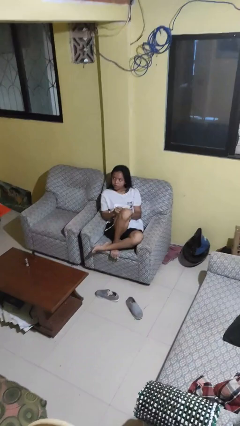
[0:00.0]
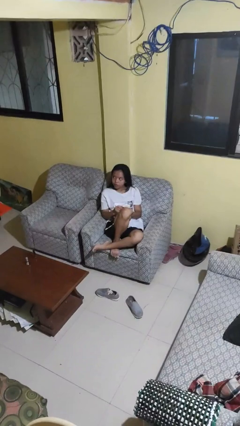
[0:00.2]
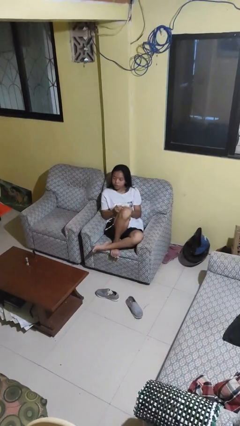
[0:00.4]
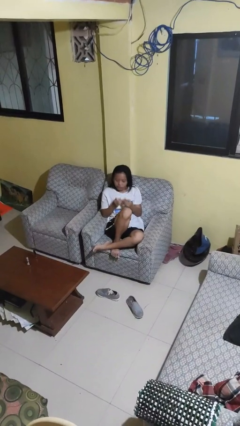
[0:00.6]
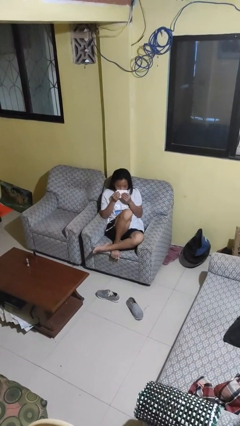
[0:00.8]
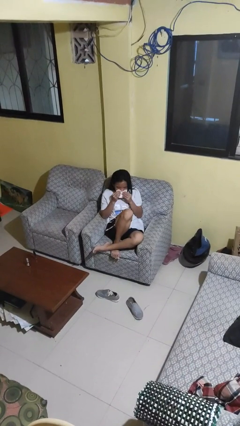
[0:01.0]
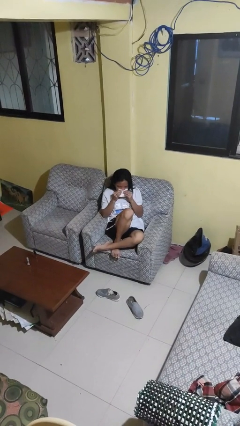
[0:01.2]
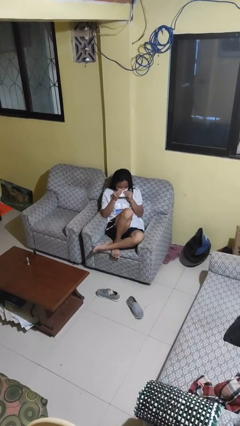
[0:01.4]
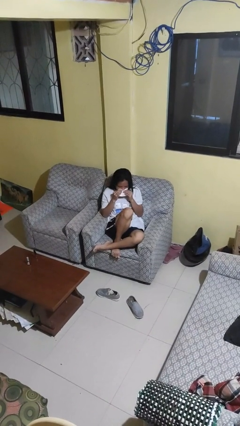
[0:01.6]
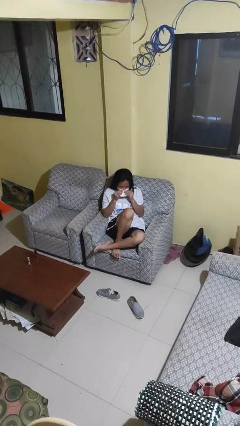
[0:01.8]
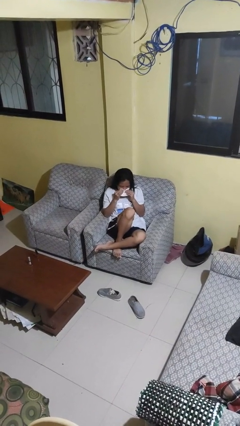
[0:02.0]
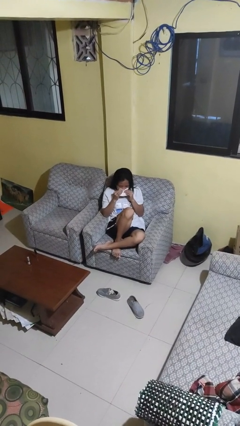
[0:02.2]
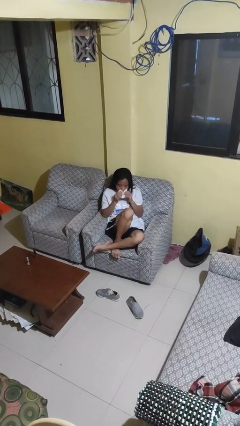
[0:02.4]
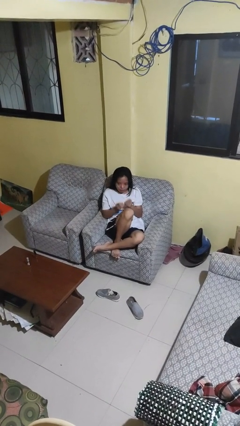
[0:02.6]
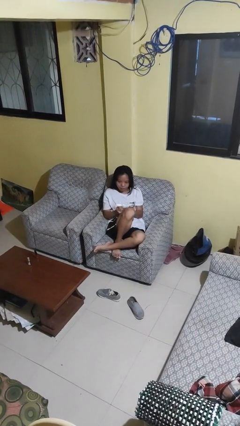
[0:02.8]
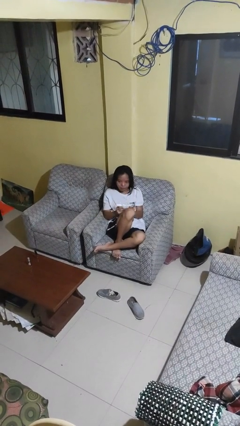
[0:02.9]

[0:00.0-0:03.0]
person blows nose

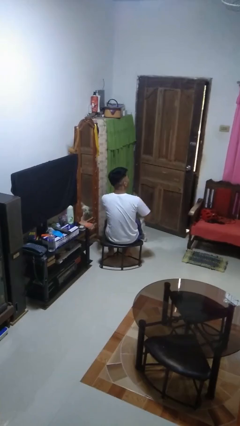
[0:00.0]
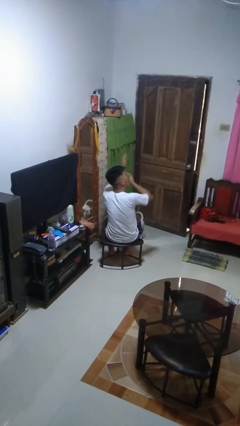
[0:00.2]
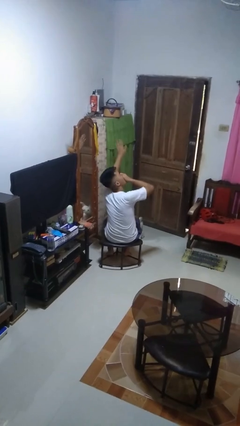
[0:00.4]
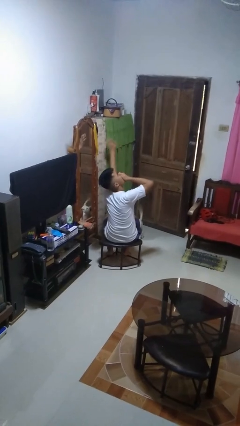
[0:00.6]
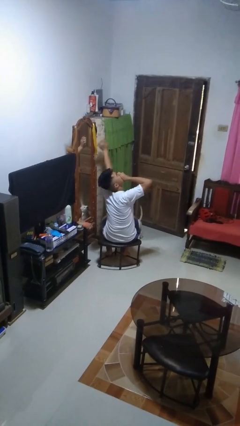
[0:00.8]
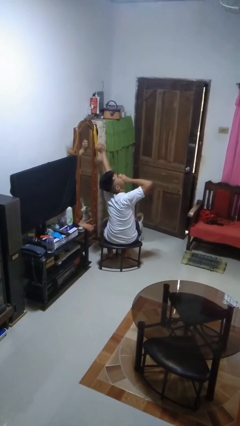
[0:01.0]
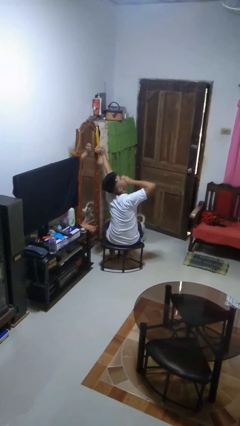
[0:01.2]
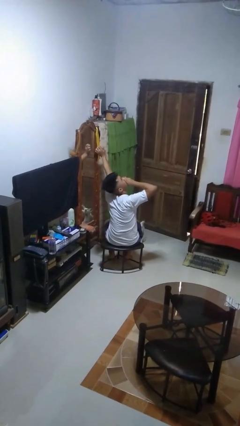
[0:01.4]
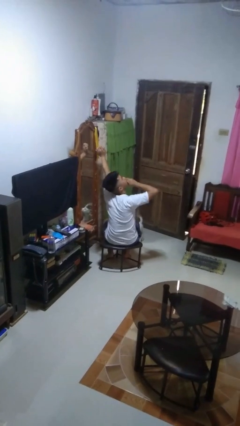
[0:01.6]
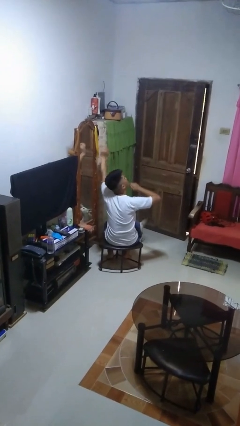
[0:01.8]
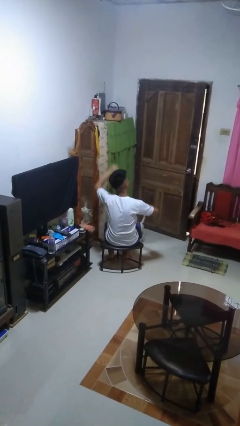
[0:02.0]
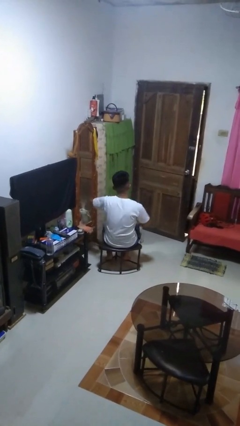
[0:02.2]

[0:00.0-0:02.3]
person yawns

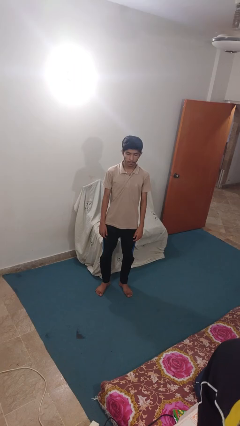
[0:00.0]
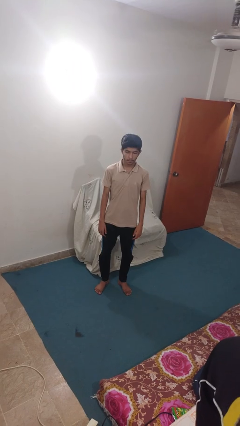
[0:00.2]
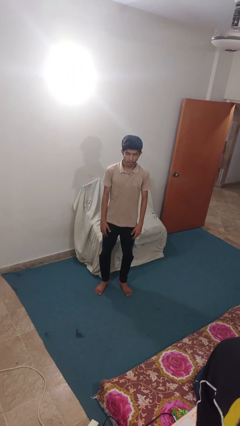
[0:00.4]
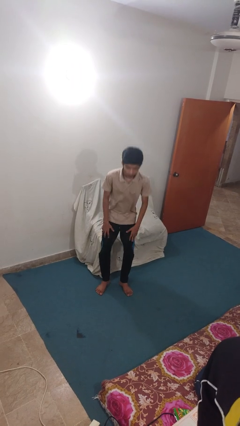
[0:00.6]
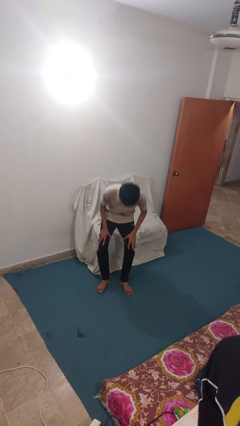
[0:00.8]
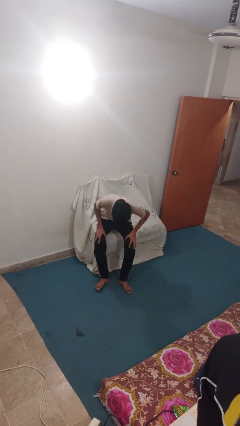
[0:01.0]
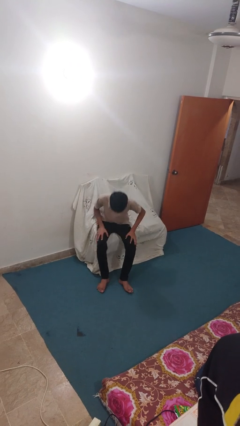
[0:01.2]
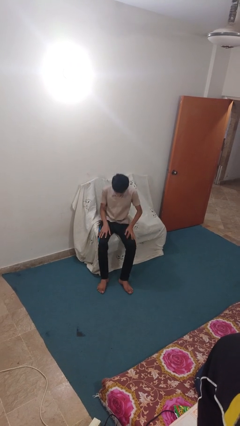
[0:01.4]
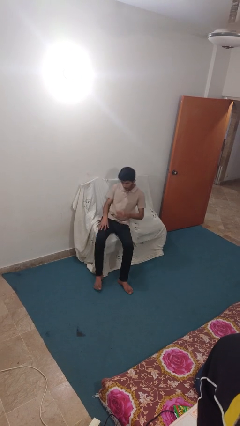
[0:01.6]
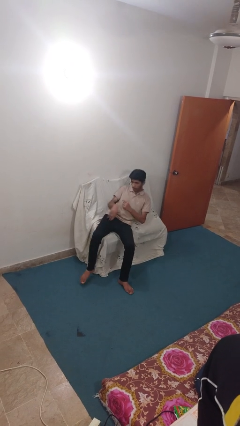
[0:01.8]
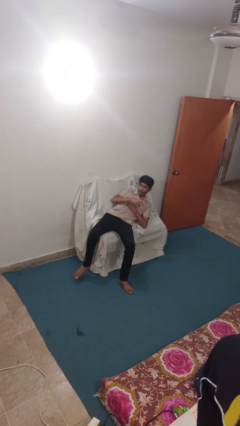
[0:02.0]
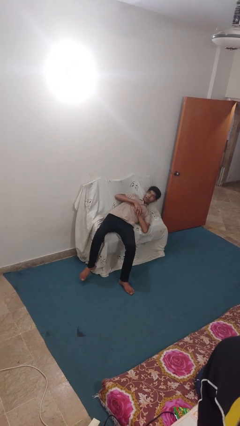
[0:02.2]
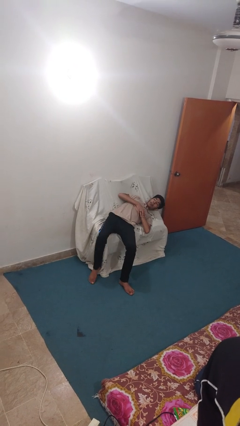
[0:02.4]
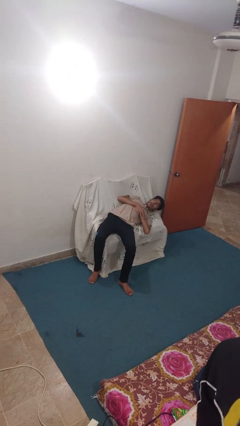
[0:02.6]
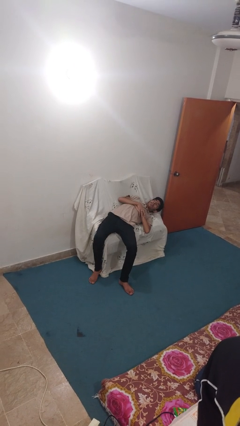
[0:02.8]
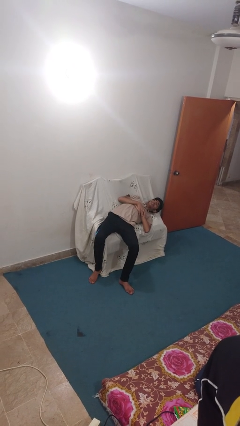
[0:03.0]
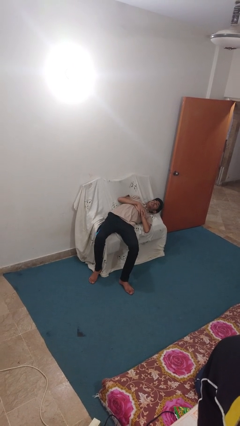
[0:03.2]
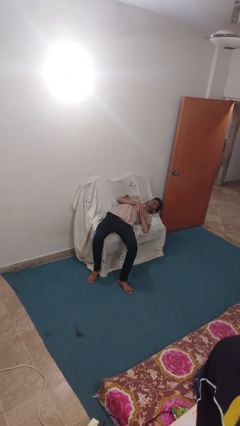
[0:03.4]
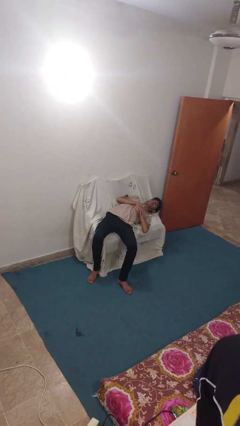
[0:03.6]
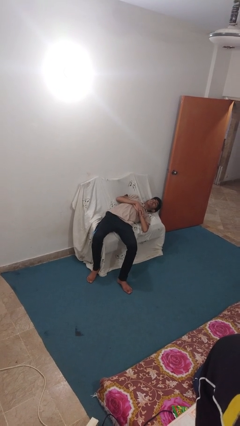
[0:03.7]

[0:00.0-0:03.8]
person lies down on couch

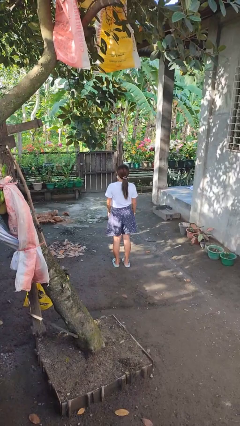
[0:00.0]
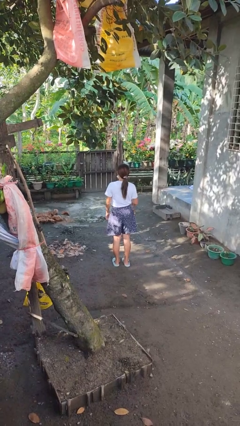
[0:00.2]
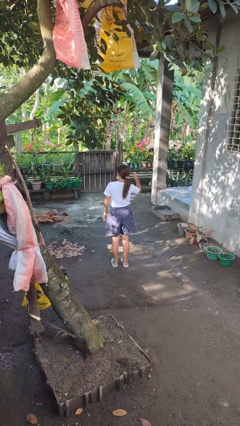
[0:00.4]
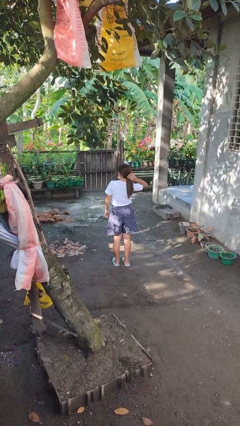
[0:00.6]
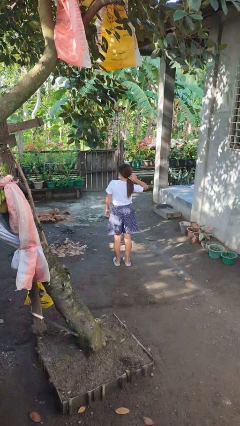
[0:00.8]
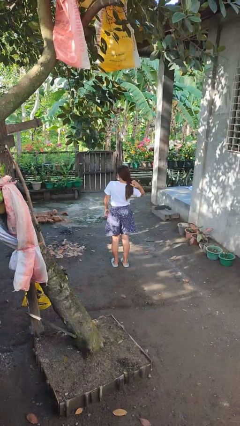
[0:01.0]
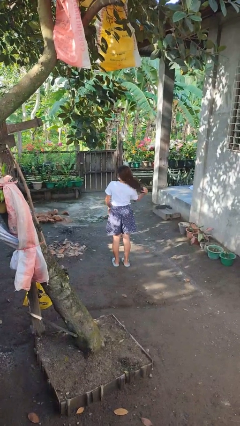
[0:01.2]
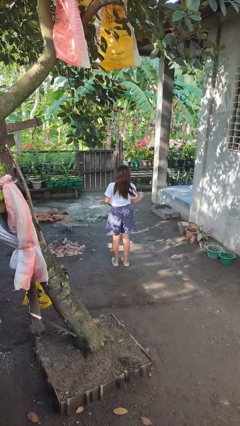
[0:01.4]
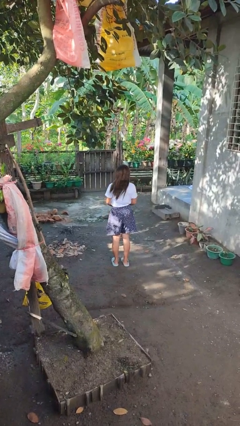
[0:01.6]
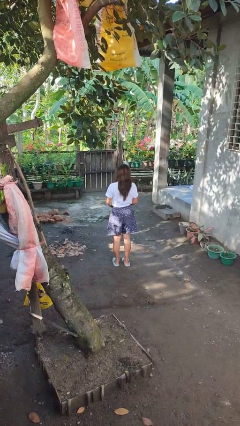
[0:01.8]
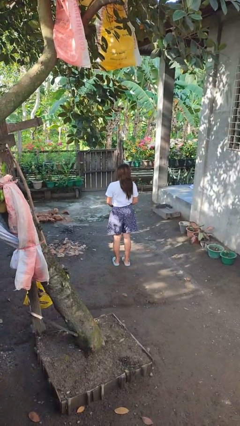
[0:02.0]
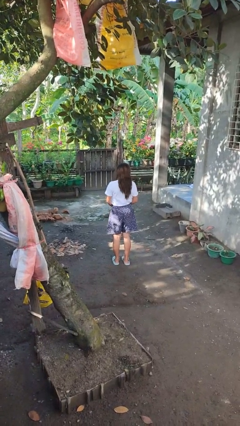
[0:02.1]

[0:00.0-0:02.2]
person takes off hairtie

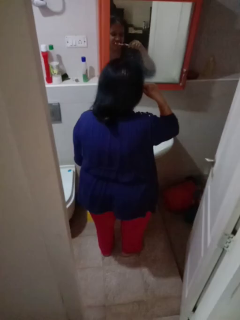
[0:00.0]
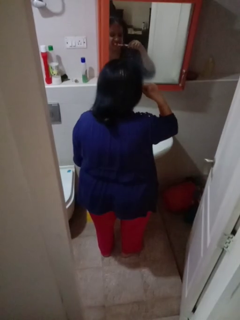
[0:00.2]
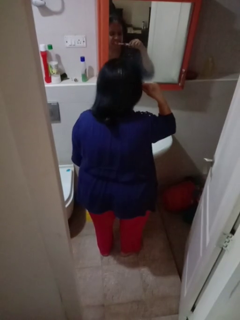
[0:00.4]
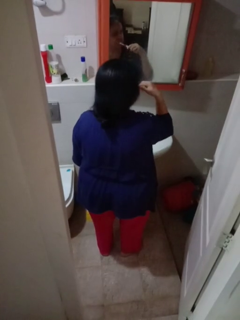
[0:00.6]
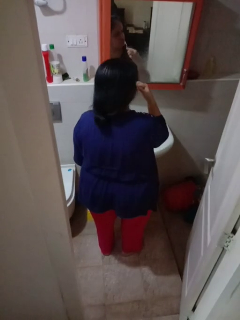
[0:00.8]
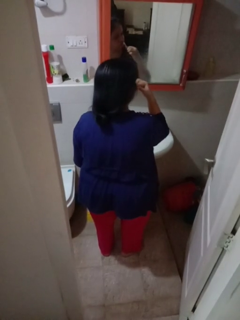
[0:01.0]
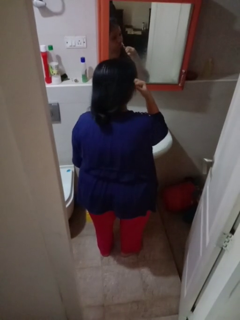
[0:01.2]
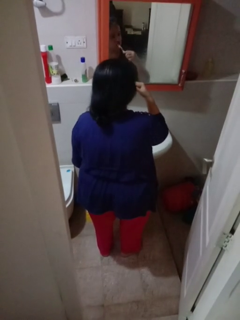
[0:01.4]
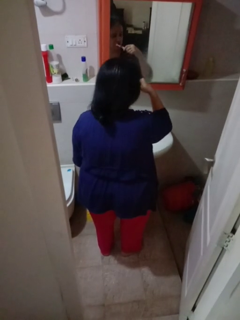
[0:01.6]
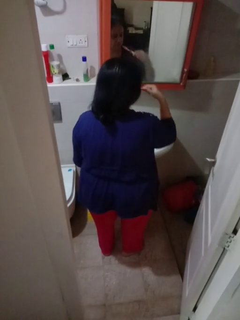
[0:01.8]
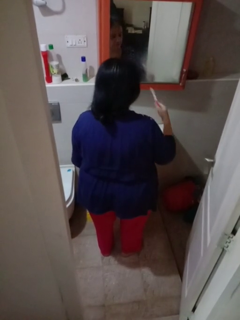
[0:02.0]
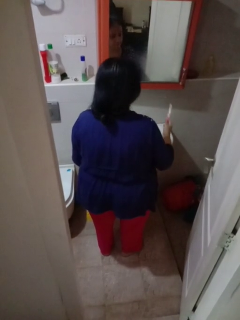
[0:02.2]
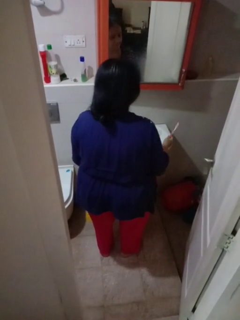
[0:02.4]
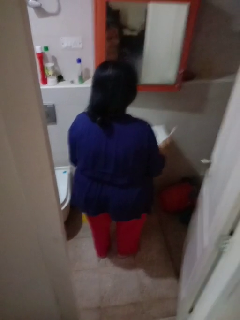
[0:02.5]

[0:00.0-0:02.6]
person brushes teeth

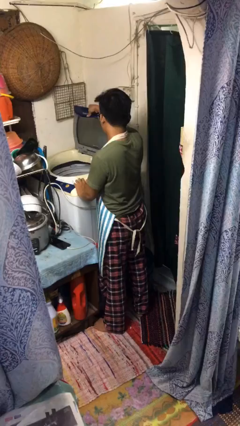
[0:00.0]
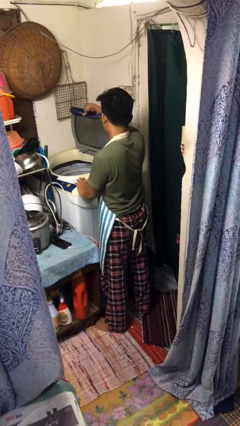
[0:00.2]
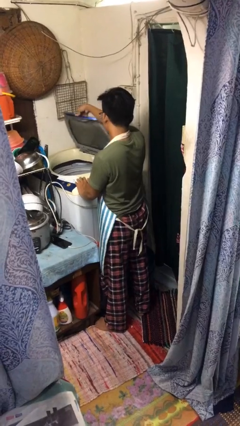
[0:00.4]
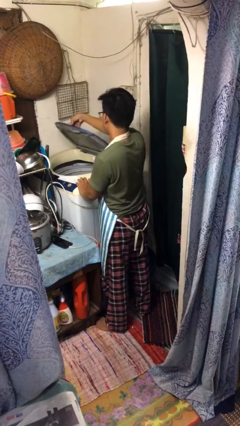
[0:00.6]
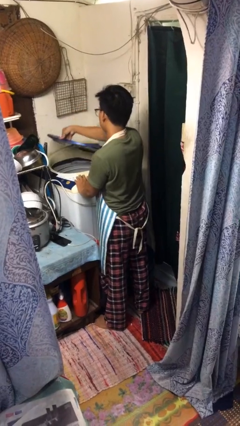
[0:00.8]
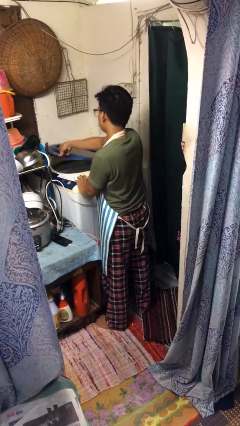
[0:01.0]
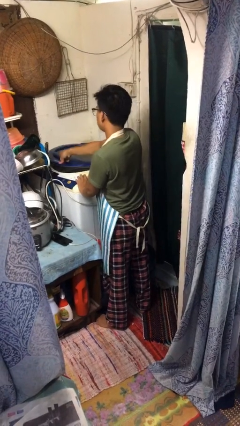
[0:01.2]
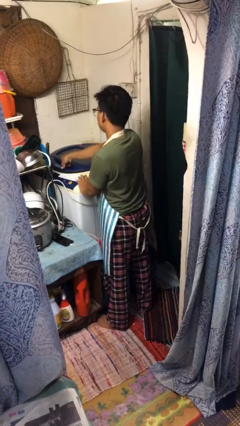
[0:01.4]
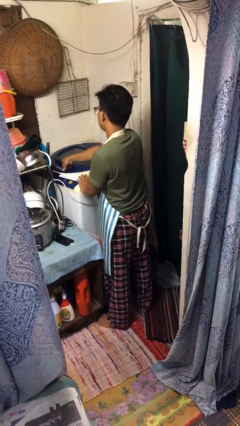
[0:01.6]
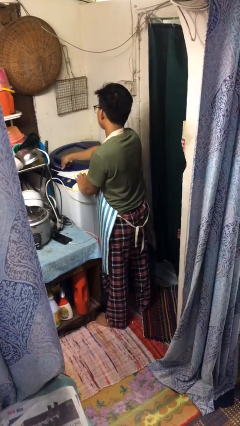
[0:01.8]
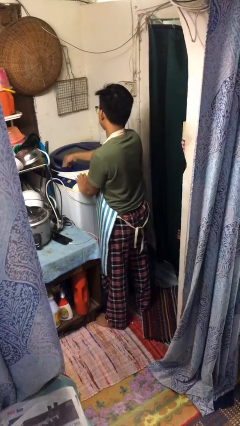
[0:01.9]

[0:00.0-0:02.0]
person closes clothes washer

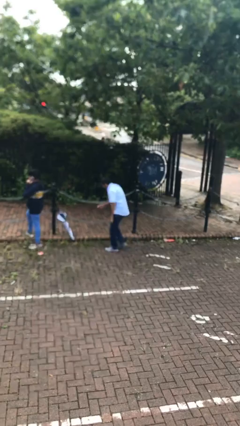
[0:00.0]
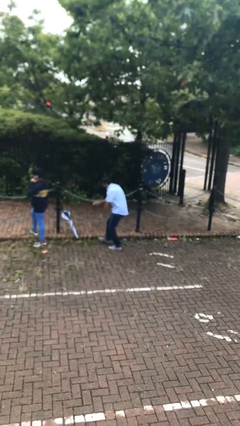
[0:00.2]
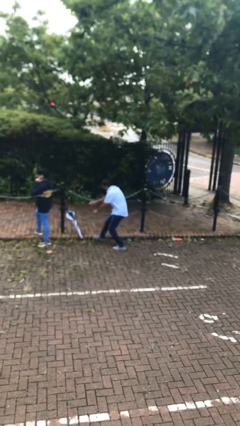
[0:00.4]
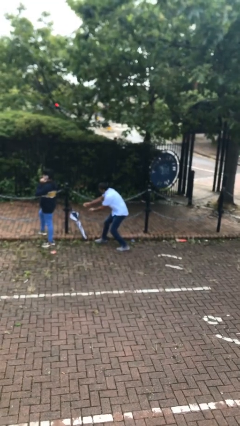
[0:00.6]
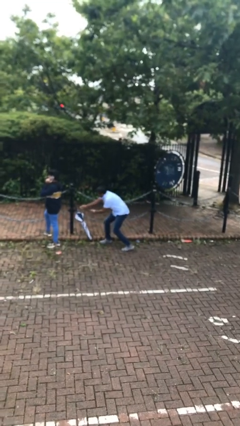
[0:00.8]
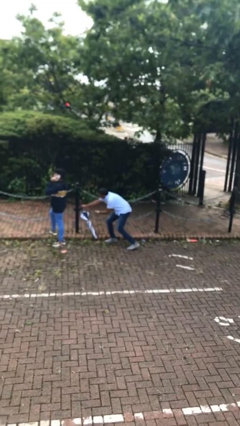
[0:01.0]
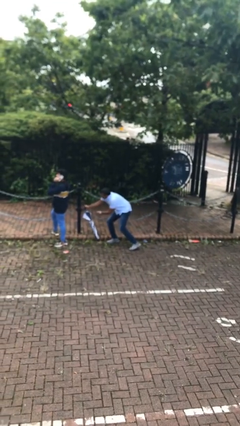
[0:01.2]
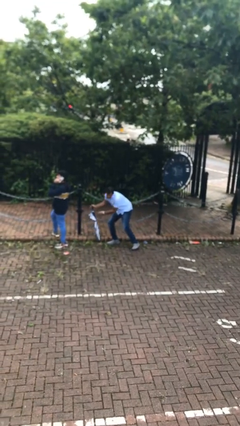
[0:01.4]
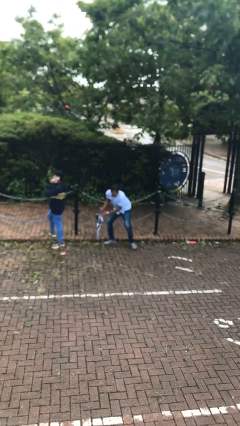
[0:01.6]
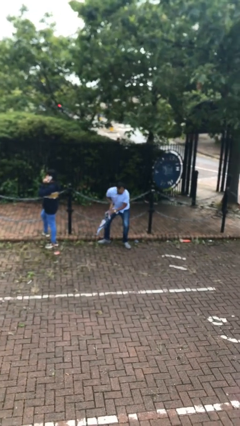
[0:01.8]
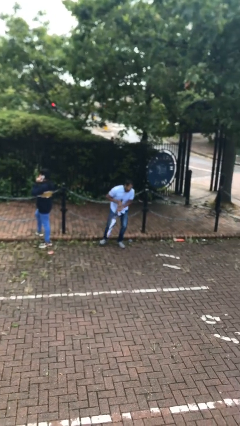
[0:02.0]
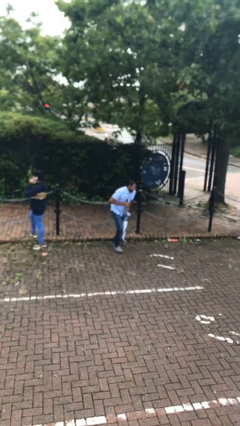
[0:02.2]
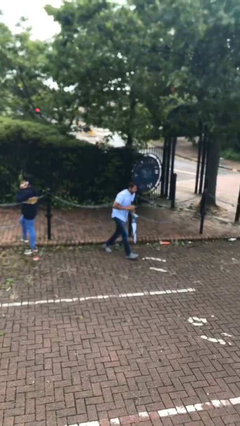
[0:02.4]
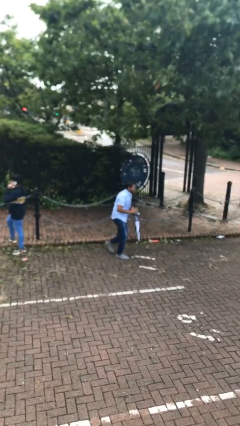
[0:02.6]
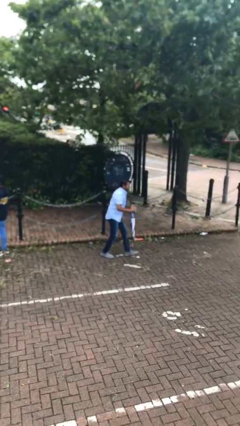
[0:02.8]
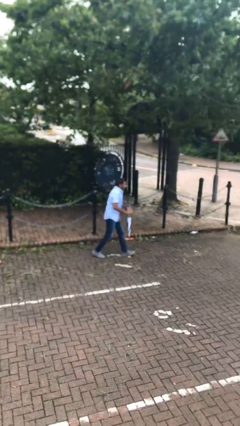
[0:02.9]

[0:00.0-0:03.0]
person steals object from person
